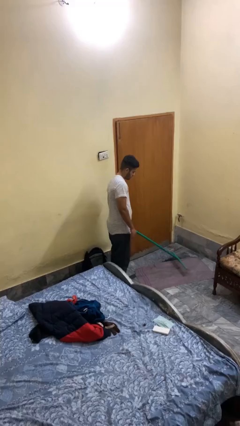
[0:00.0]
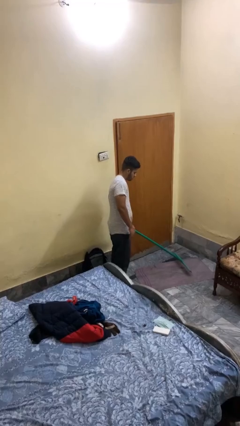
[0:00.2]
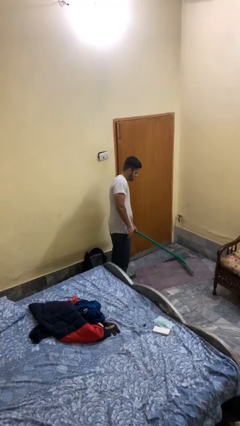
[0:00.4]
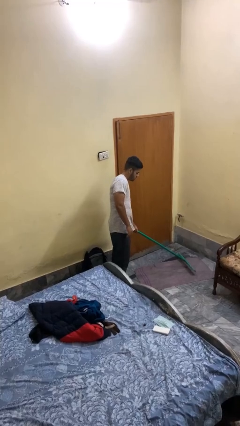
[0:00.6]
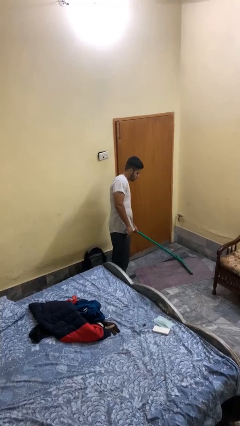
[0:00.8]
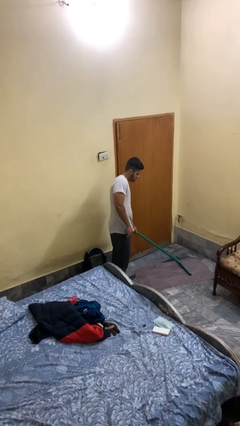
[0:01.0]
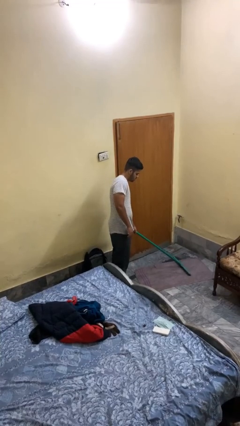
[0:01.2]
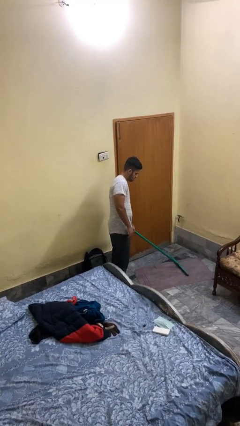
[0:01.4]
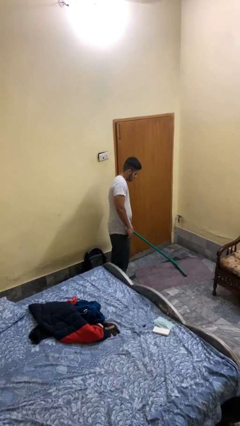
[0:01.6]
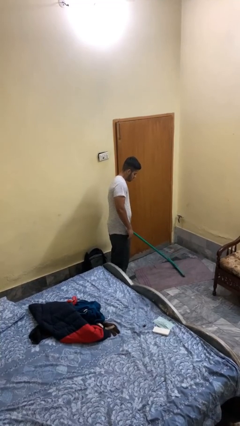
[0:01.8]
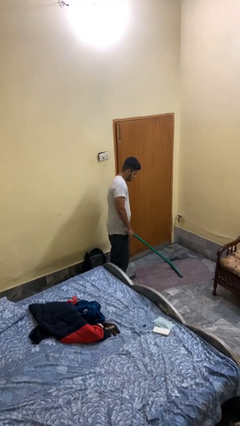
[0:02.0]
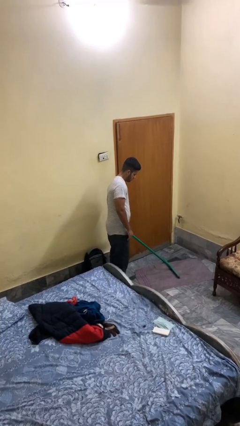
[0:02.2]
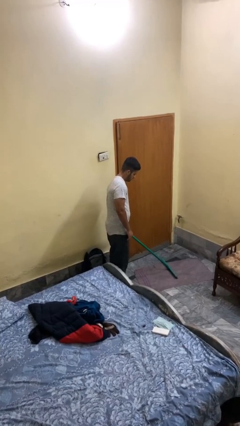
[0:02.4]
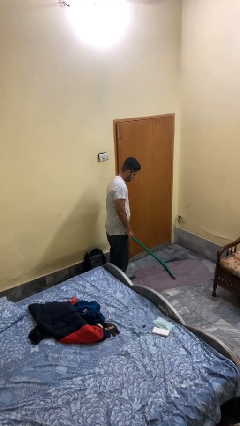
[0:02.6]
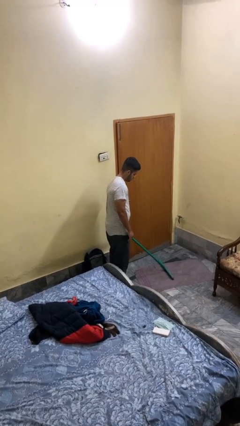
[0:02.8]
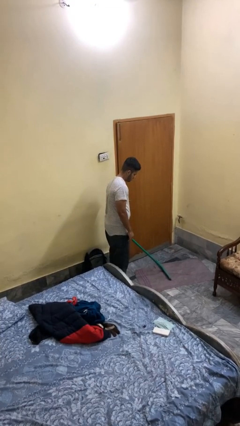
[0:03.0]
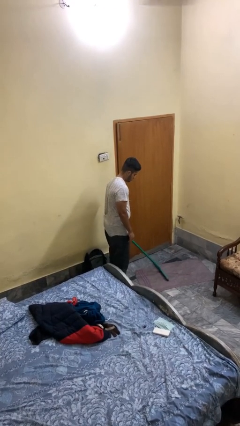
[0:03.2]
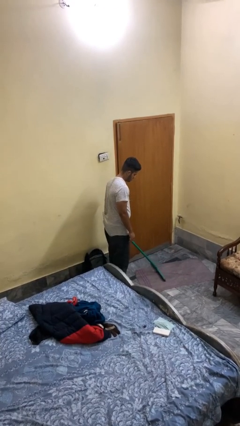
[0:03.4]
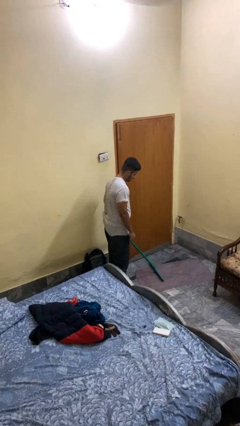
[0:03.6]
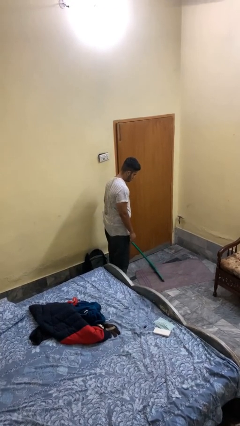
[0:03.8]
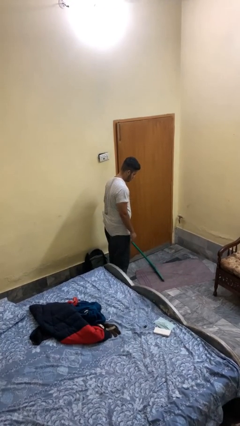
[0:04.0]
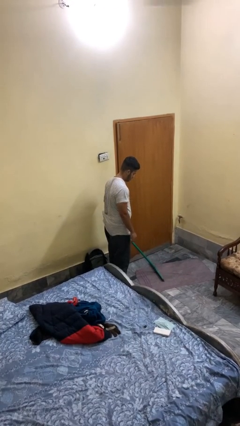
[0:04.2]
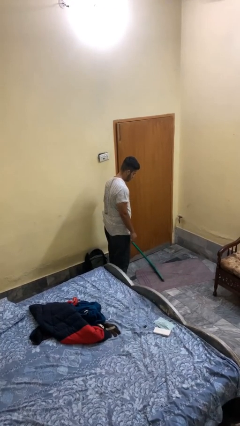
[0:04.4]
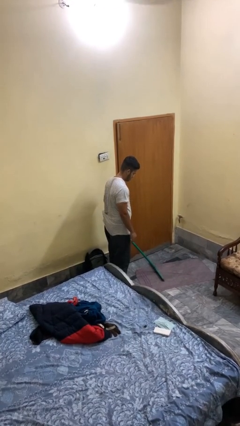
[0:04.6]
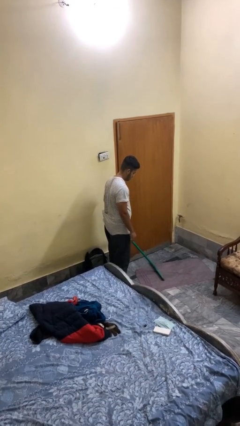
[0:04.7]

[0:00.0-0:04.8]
person vacuums carpet

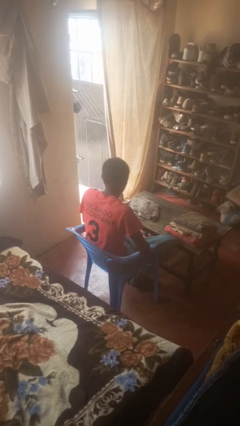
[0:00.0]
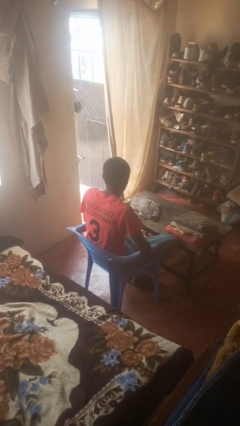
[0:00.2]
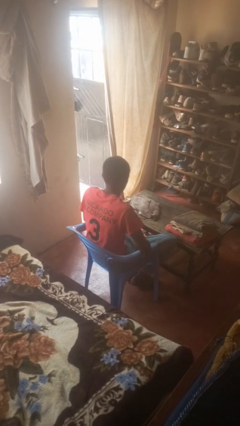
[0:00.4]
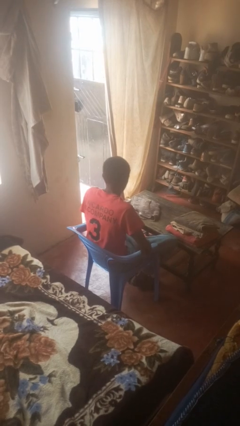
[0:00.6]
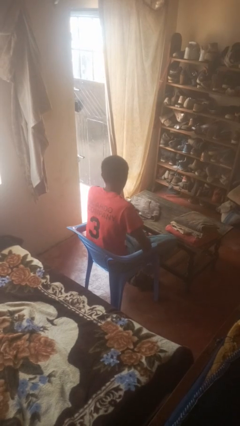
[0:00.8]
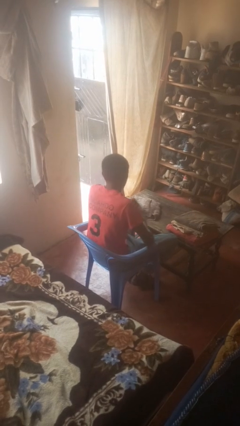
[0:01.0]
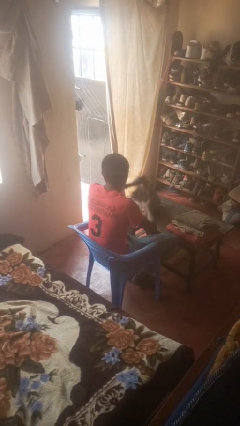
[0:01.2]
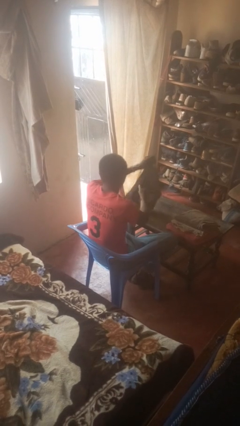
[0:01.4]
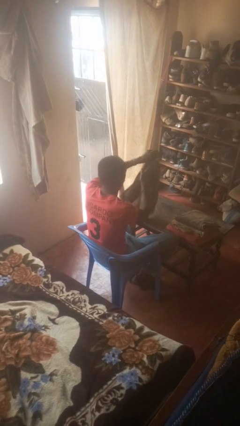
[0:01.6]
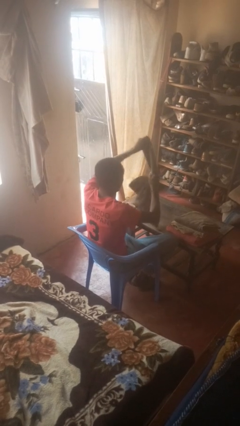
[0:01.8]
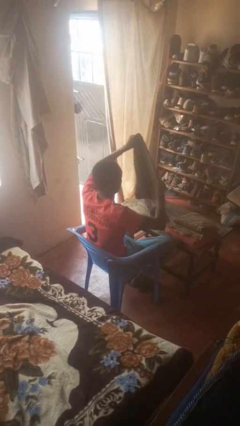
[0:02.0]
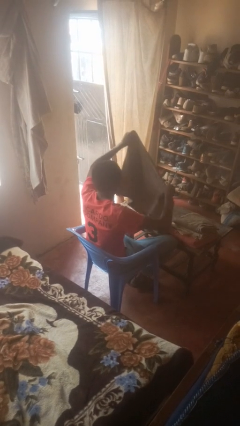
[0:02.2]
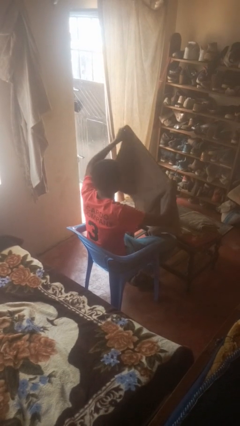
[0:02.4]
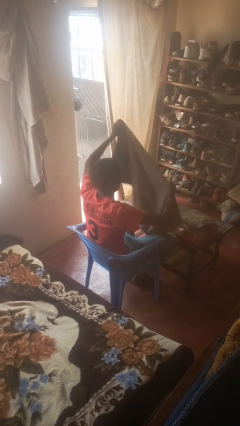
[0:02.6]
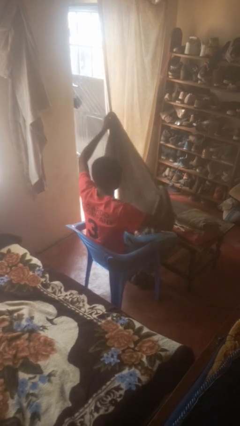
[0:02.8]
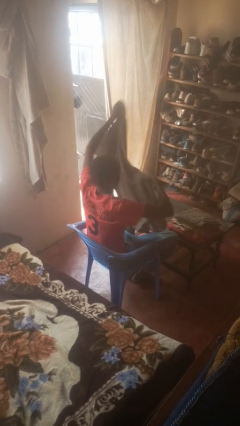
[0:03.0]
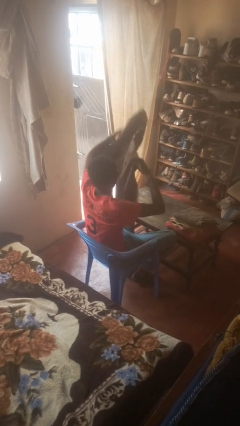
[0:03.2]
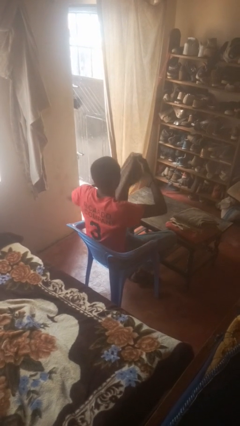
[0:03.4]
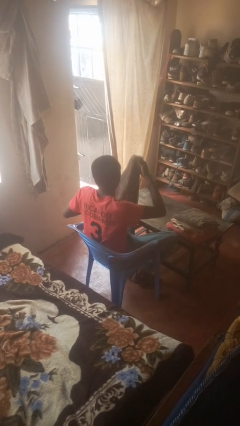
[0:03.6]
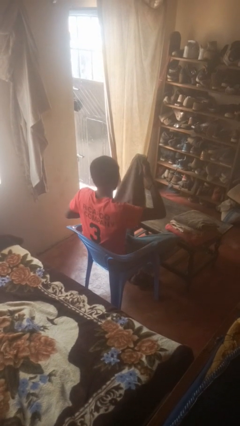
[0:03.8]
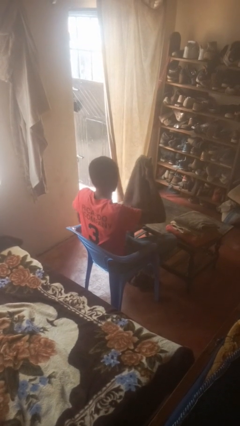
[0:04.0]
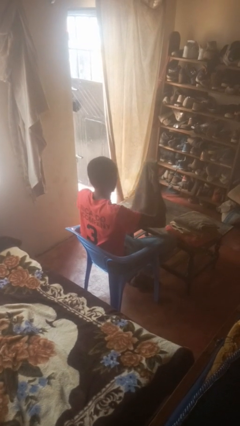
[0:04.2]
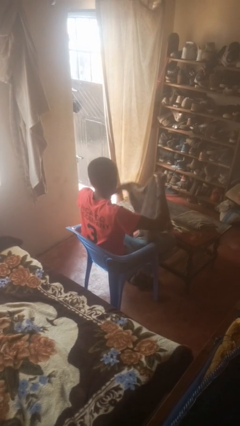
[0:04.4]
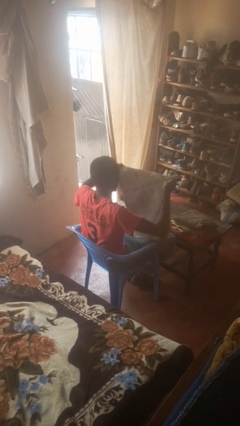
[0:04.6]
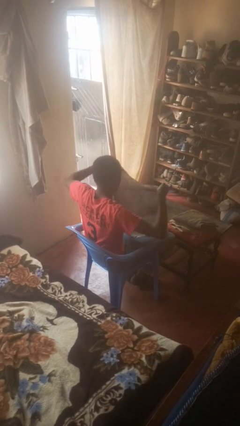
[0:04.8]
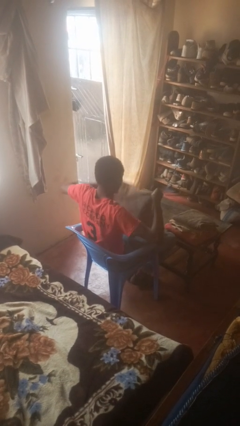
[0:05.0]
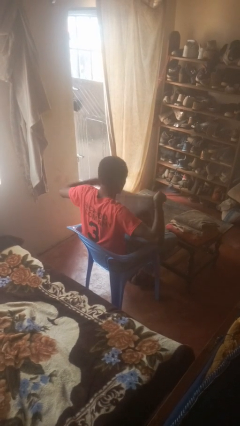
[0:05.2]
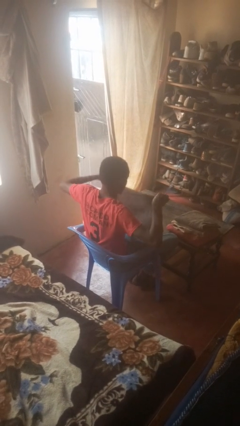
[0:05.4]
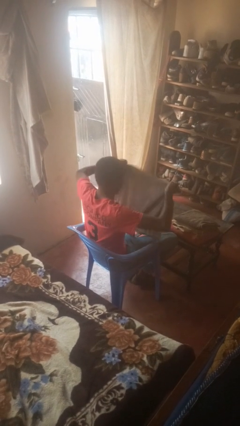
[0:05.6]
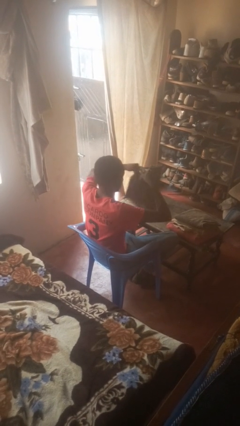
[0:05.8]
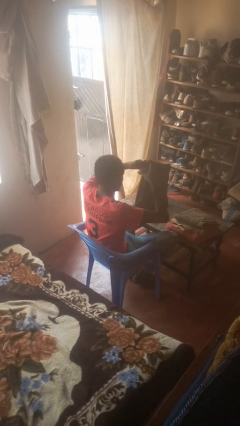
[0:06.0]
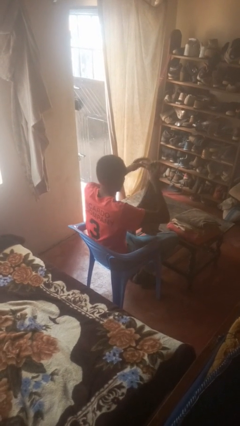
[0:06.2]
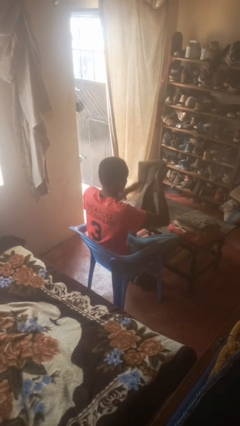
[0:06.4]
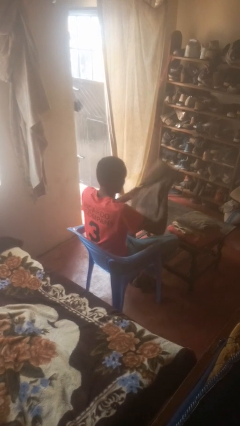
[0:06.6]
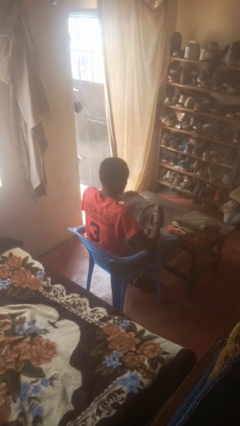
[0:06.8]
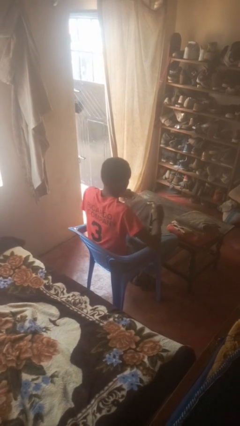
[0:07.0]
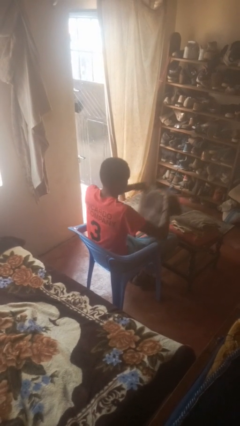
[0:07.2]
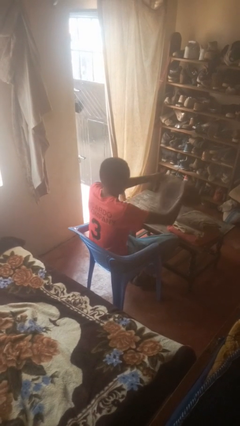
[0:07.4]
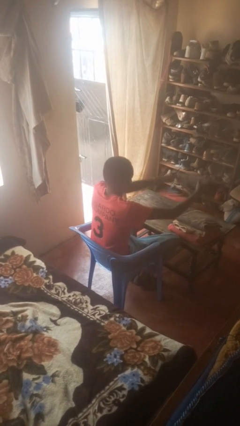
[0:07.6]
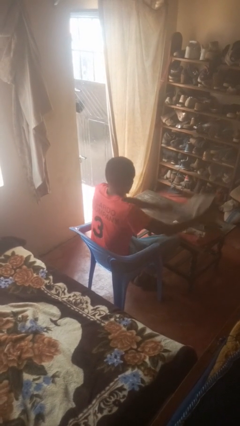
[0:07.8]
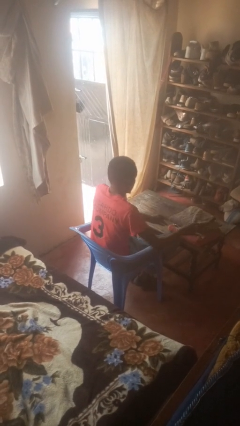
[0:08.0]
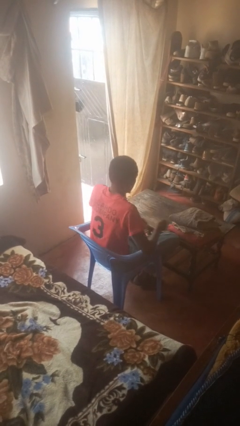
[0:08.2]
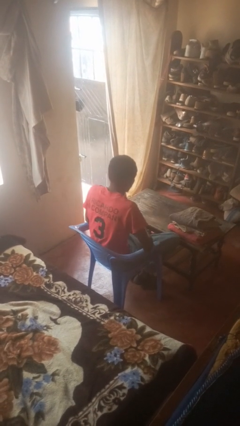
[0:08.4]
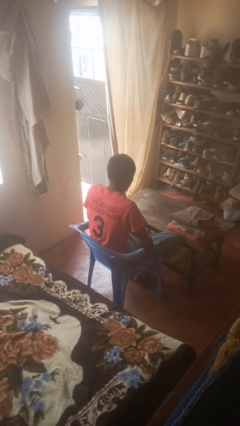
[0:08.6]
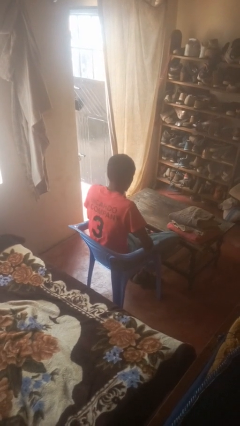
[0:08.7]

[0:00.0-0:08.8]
person folds towel

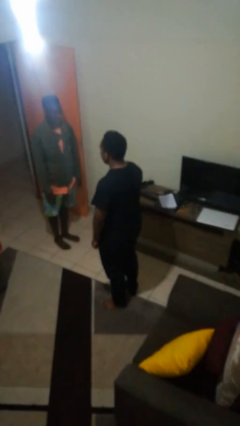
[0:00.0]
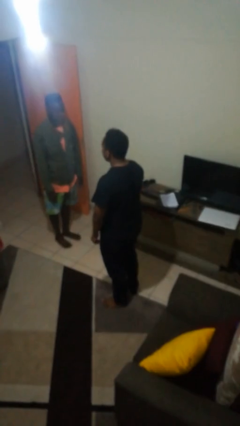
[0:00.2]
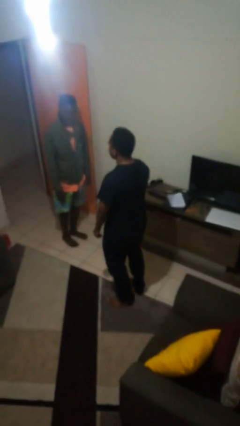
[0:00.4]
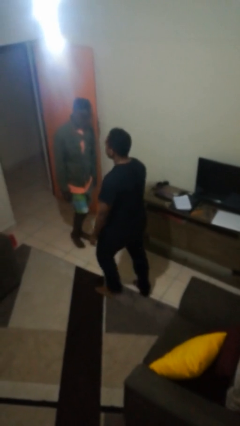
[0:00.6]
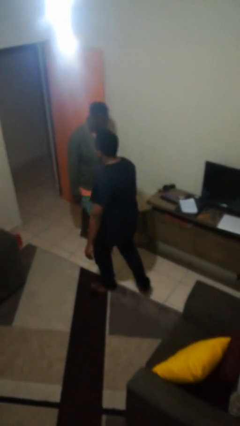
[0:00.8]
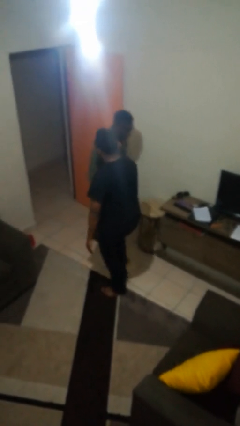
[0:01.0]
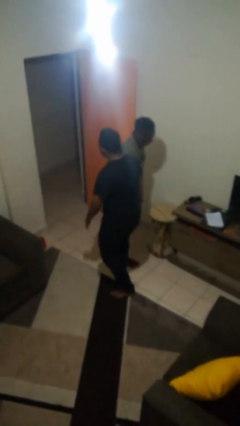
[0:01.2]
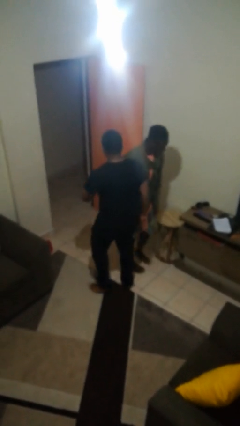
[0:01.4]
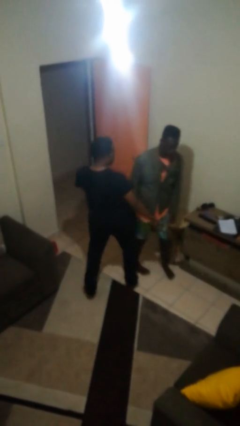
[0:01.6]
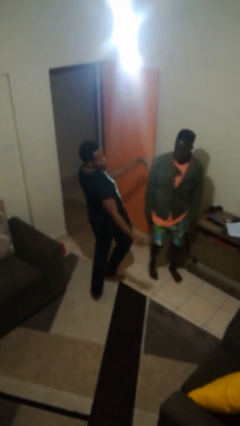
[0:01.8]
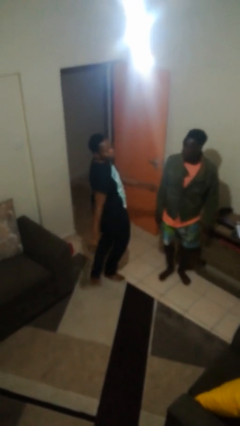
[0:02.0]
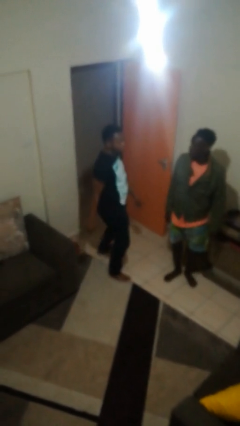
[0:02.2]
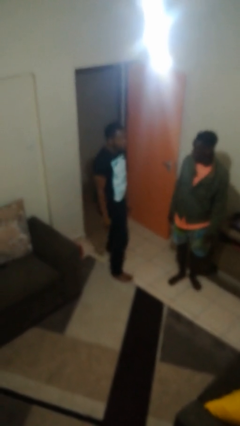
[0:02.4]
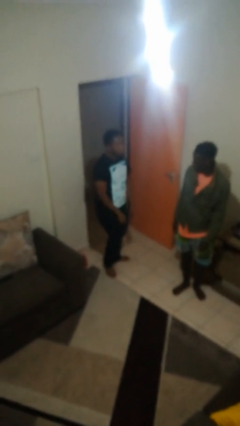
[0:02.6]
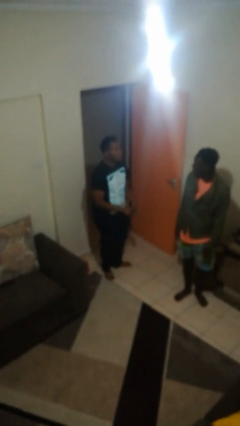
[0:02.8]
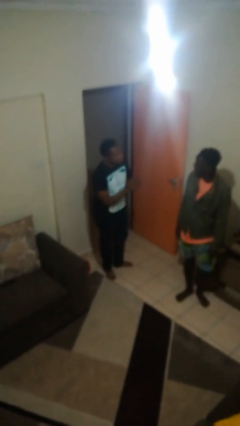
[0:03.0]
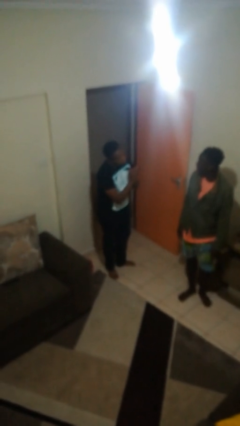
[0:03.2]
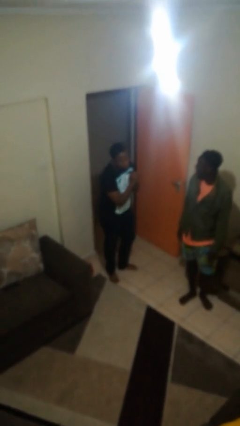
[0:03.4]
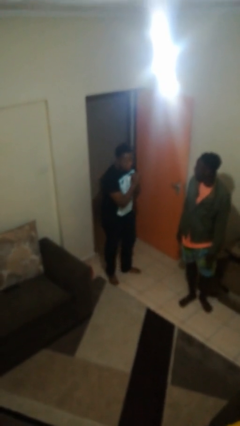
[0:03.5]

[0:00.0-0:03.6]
person bumps into person

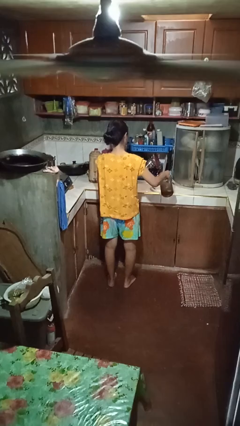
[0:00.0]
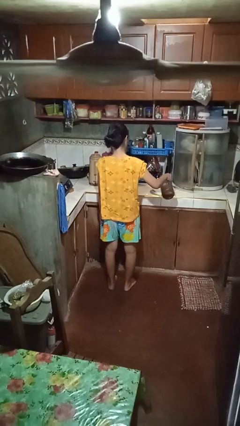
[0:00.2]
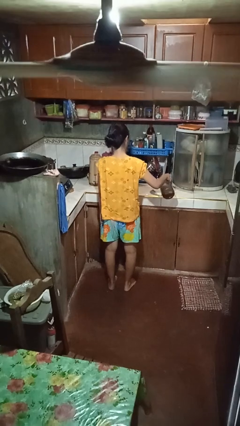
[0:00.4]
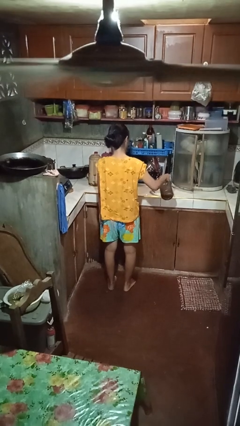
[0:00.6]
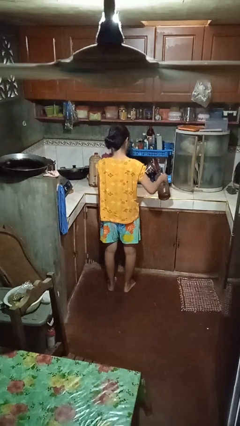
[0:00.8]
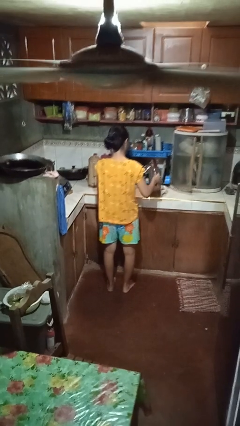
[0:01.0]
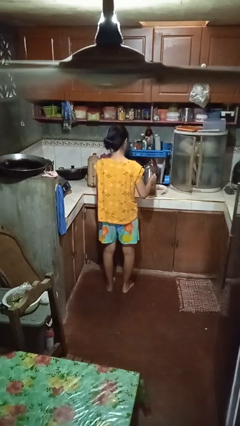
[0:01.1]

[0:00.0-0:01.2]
person pours into bowl
